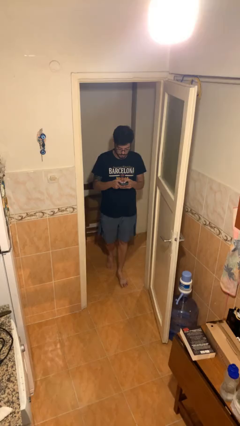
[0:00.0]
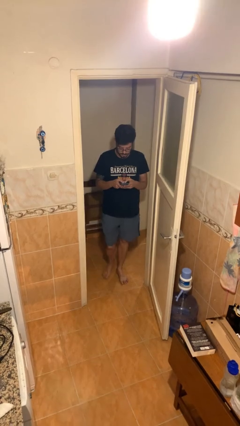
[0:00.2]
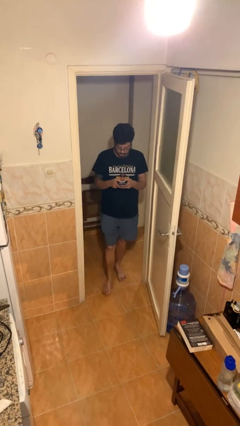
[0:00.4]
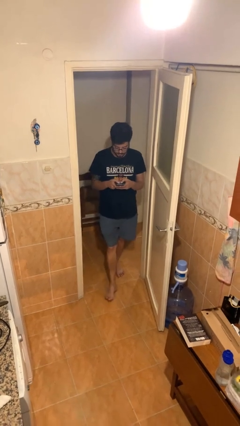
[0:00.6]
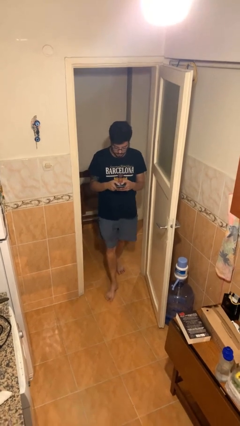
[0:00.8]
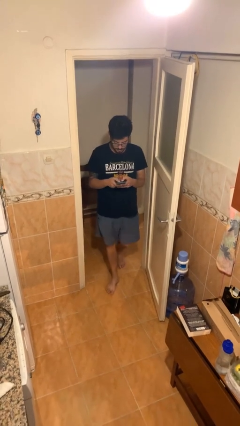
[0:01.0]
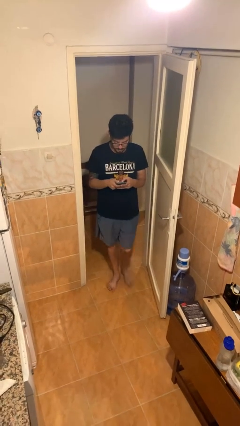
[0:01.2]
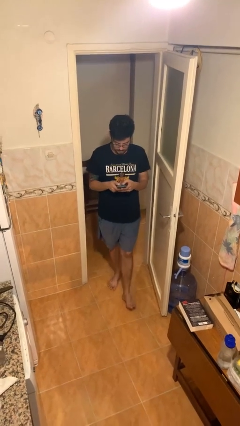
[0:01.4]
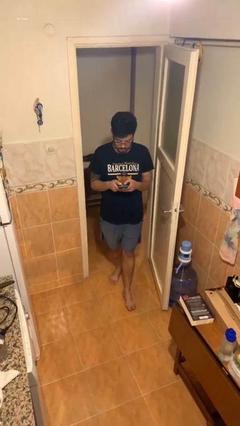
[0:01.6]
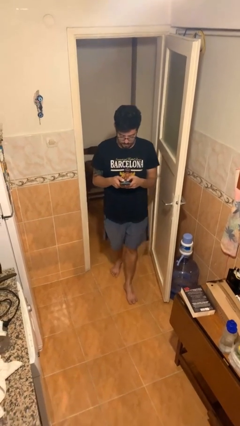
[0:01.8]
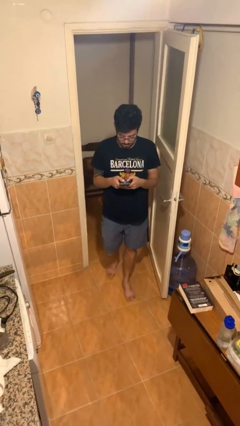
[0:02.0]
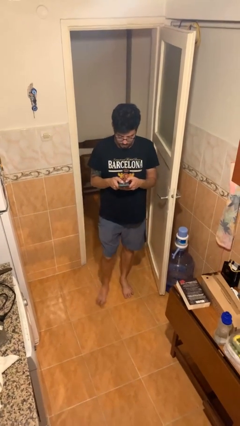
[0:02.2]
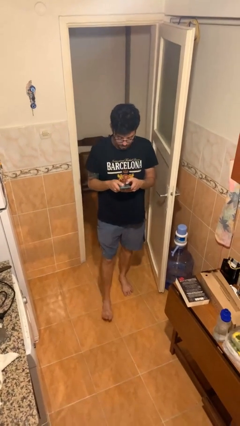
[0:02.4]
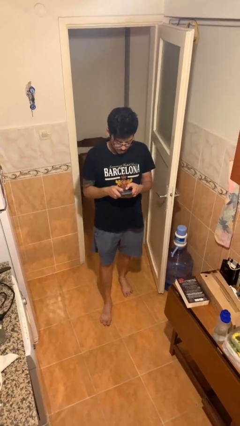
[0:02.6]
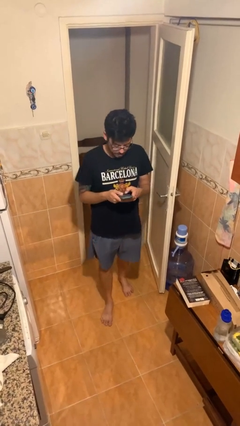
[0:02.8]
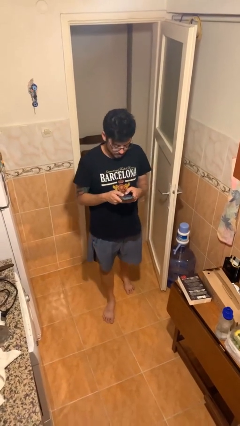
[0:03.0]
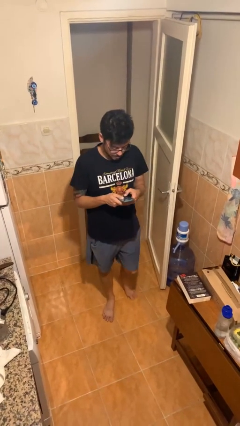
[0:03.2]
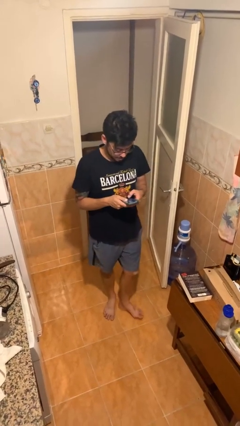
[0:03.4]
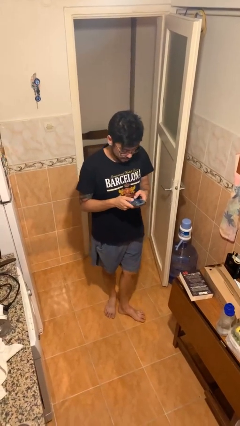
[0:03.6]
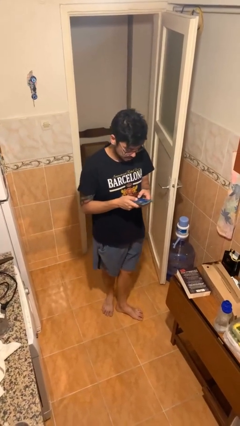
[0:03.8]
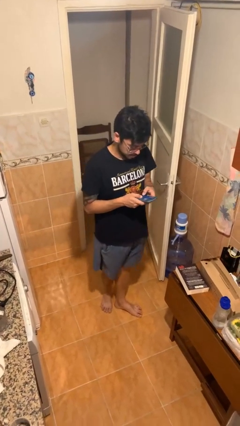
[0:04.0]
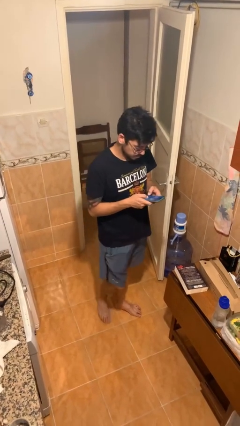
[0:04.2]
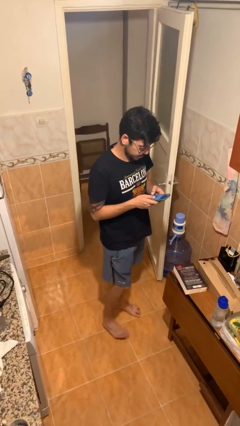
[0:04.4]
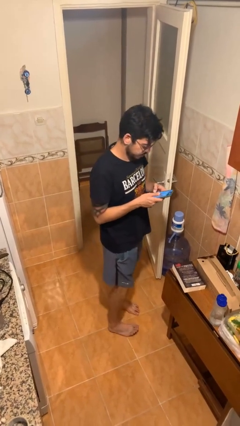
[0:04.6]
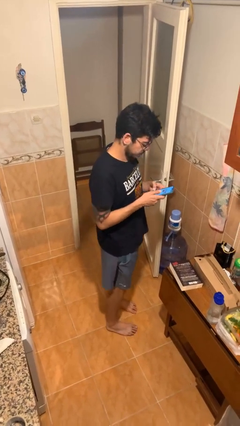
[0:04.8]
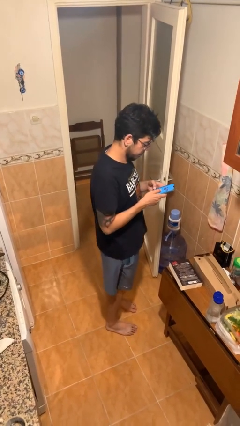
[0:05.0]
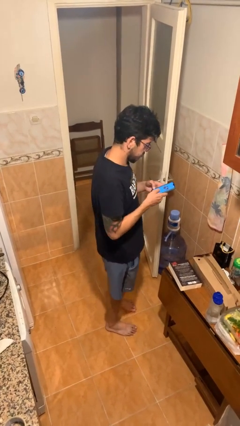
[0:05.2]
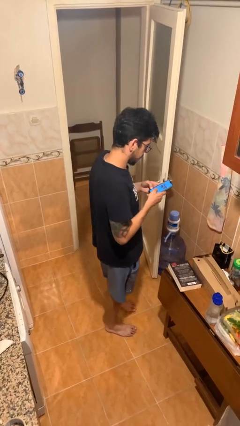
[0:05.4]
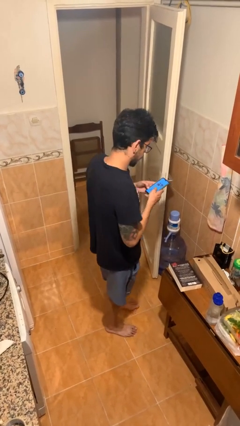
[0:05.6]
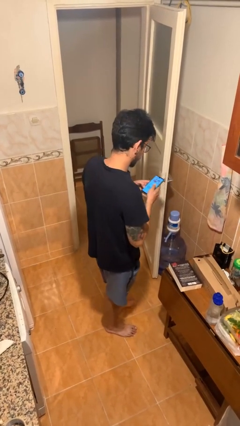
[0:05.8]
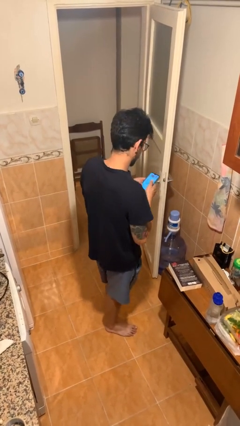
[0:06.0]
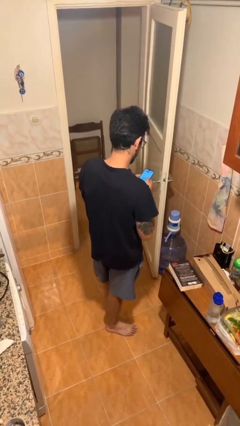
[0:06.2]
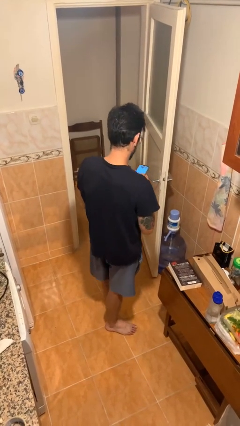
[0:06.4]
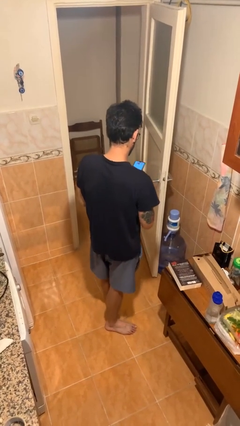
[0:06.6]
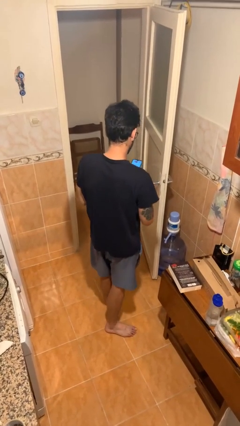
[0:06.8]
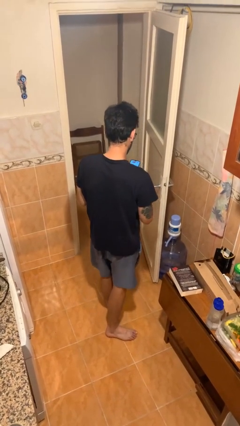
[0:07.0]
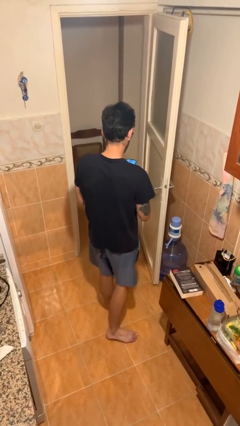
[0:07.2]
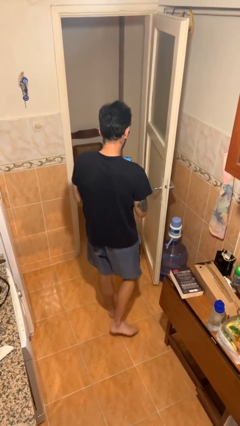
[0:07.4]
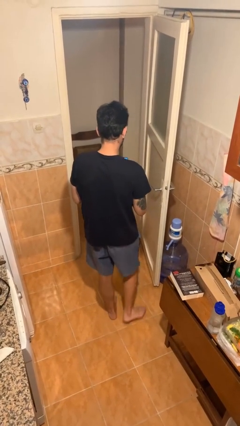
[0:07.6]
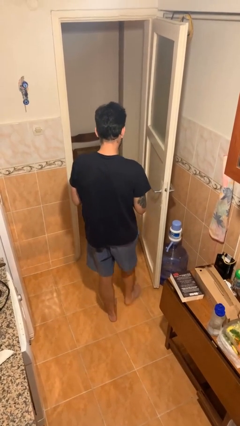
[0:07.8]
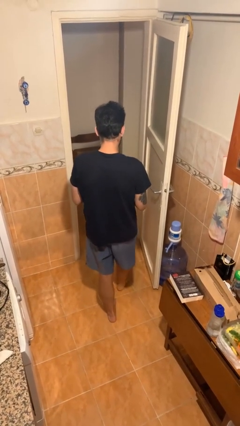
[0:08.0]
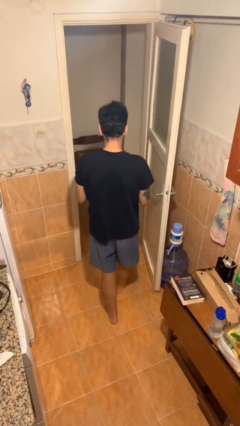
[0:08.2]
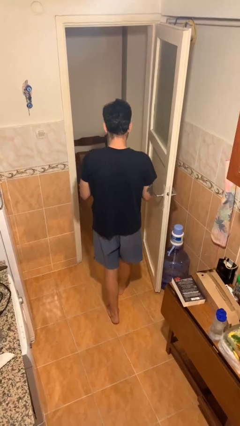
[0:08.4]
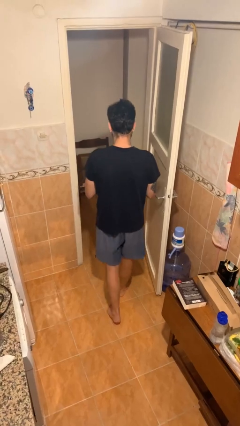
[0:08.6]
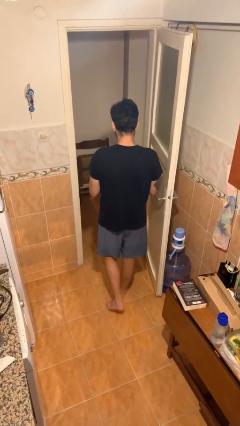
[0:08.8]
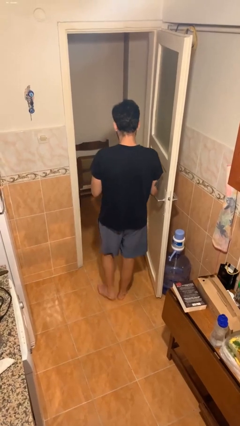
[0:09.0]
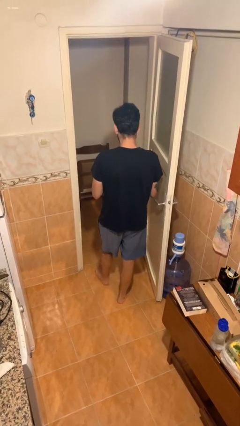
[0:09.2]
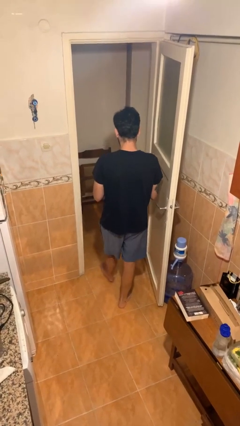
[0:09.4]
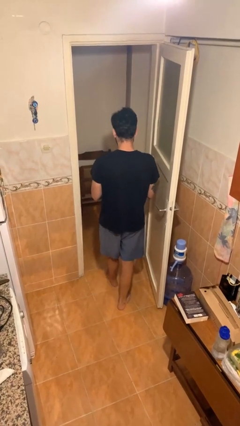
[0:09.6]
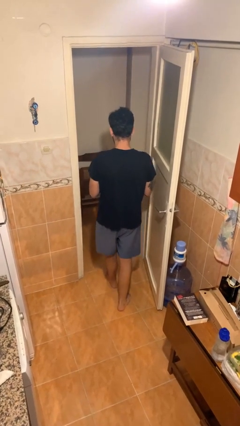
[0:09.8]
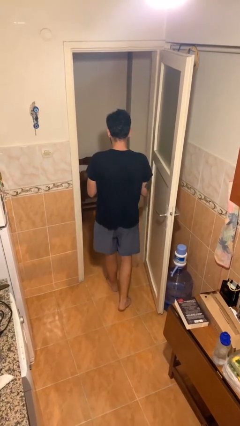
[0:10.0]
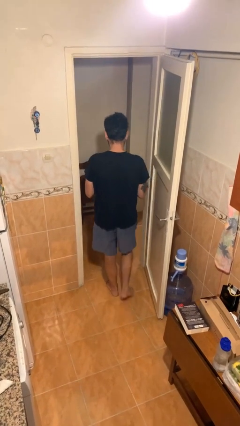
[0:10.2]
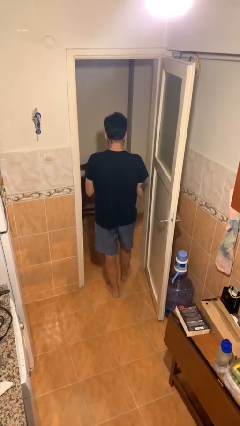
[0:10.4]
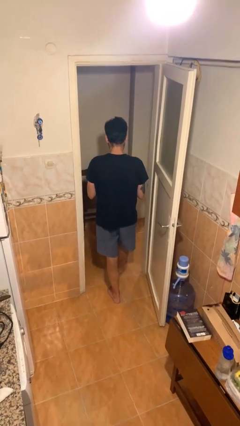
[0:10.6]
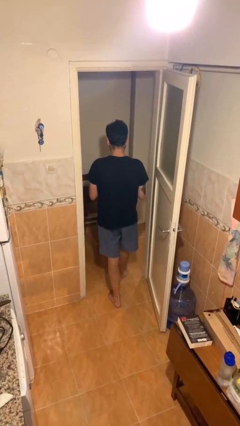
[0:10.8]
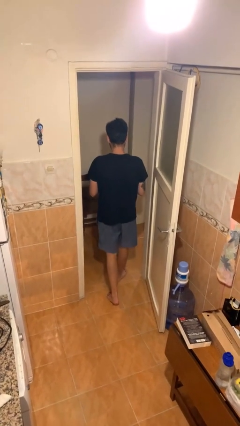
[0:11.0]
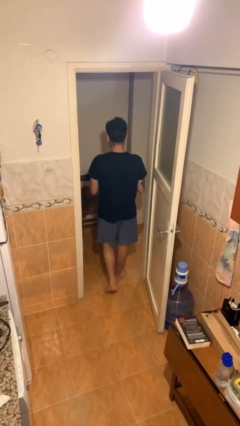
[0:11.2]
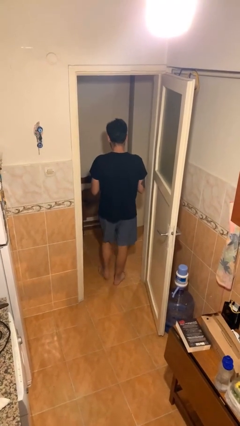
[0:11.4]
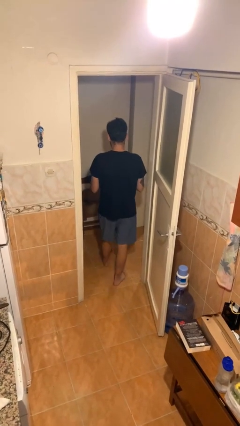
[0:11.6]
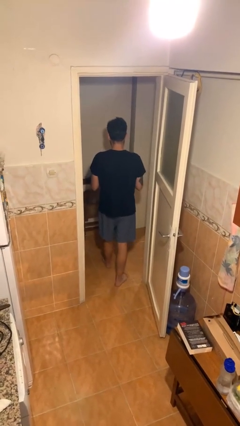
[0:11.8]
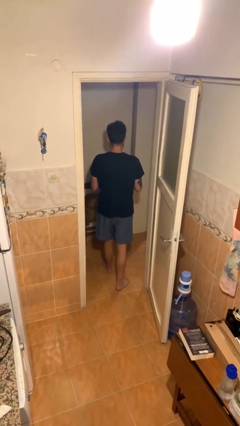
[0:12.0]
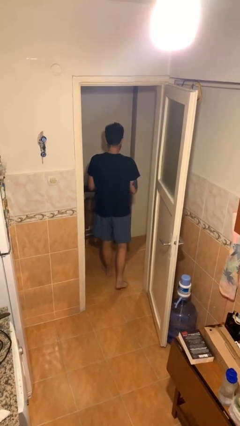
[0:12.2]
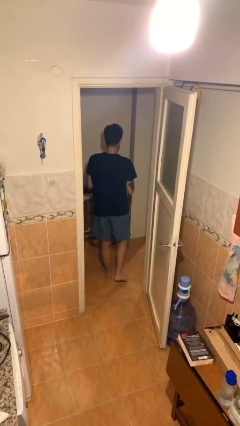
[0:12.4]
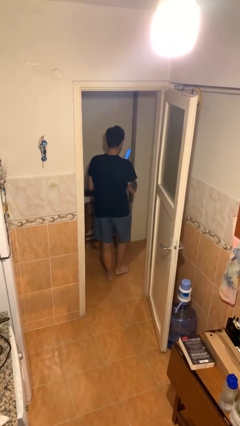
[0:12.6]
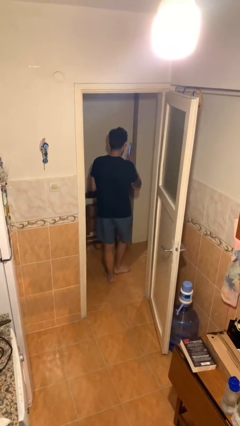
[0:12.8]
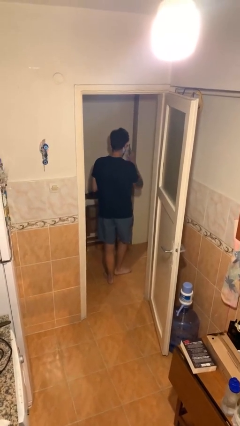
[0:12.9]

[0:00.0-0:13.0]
person texts on phone

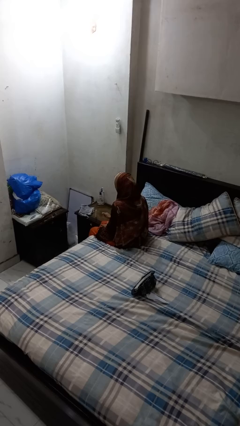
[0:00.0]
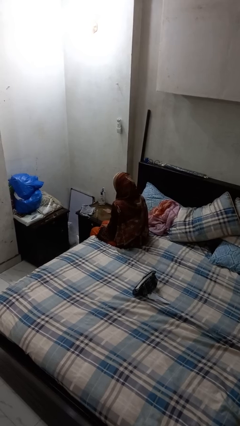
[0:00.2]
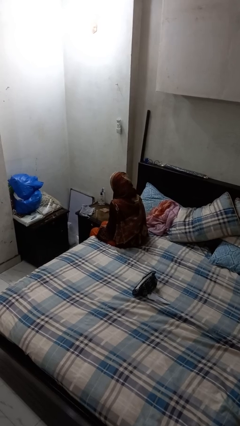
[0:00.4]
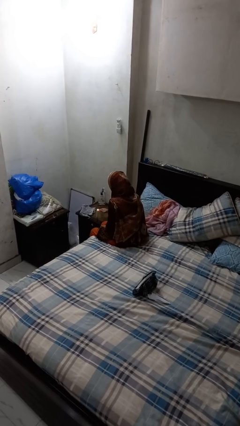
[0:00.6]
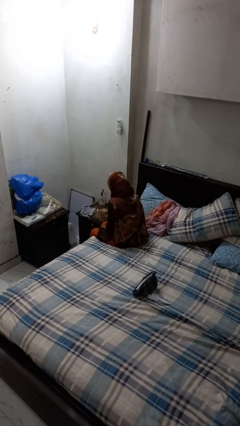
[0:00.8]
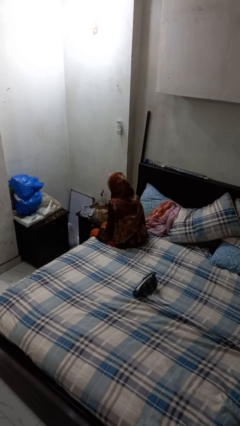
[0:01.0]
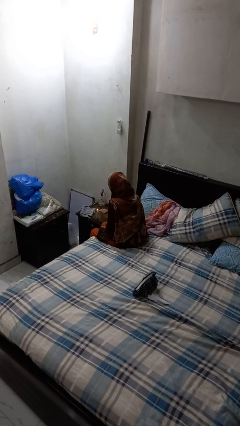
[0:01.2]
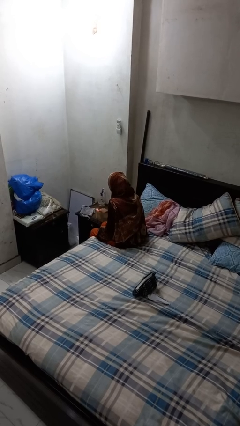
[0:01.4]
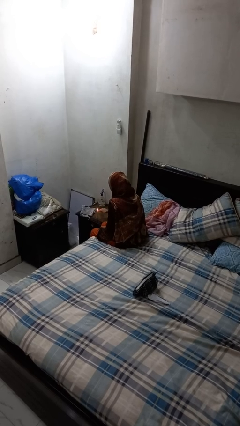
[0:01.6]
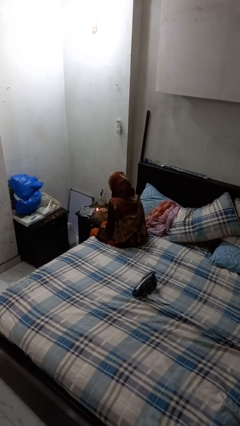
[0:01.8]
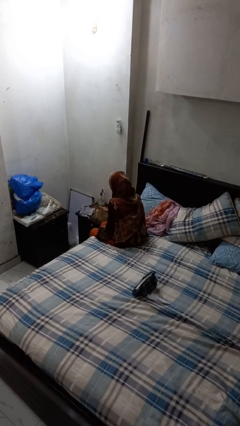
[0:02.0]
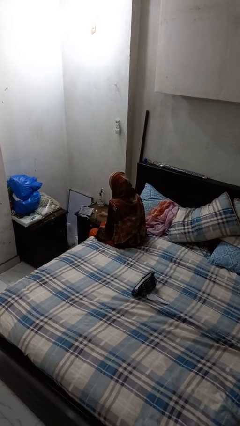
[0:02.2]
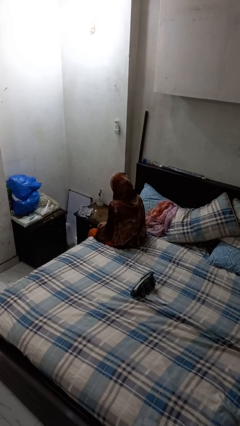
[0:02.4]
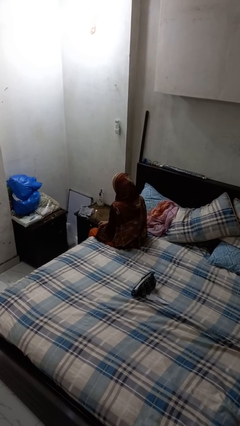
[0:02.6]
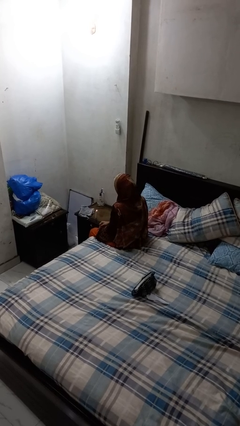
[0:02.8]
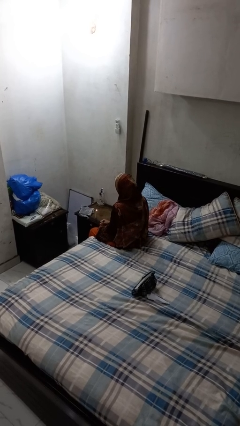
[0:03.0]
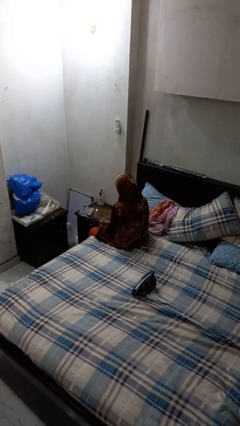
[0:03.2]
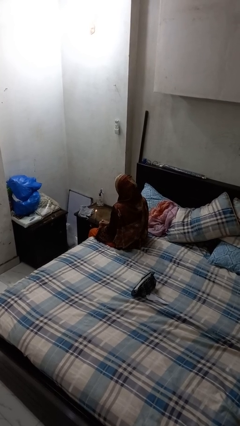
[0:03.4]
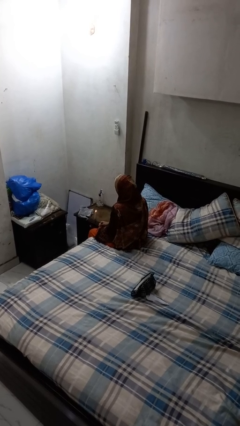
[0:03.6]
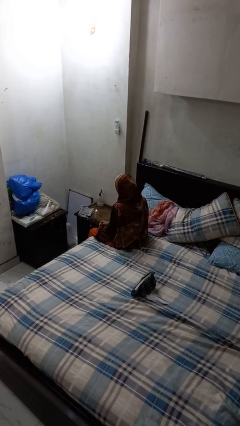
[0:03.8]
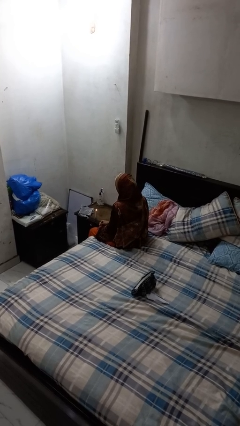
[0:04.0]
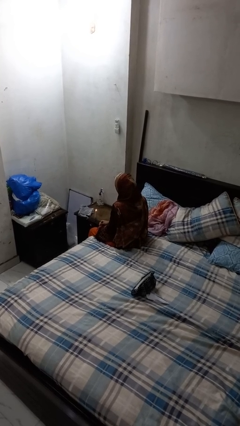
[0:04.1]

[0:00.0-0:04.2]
person lights candle

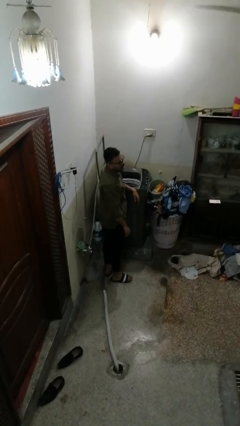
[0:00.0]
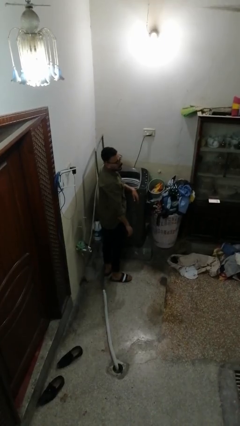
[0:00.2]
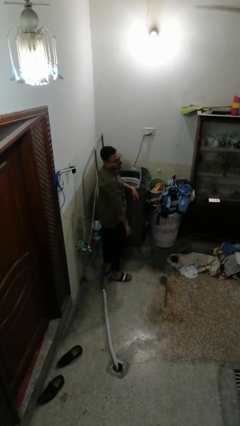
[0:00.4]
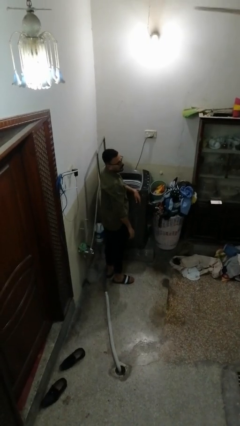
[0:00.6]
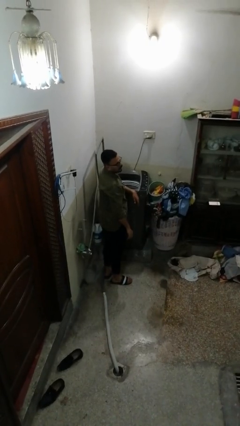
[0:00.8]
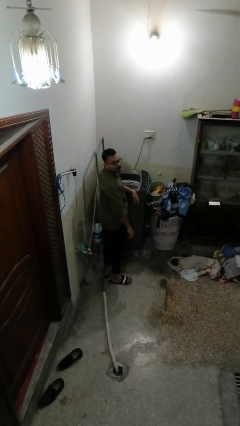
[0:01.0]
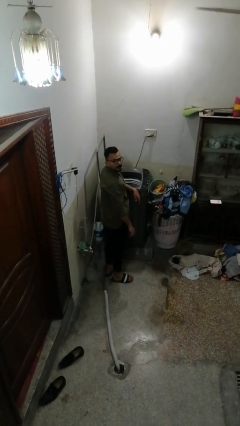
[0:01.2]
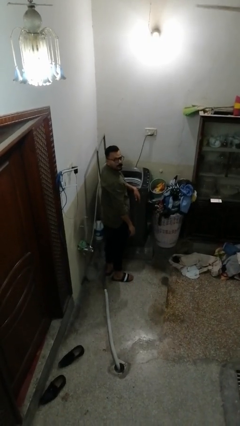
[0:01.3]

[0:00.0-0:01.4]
person loads clotheswasher
